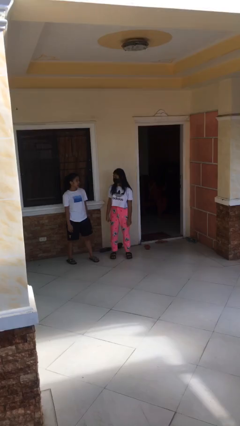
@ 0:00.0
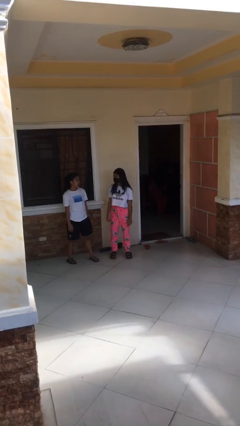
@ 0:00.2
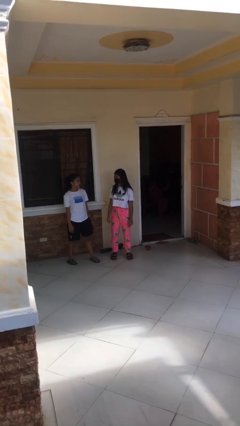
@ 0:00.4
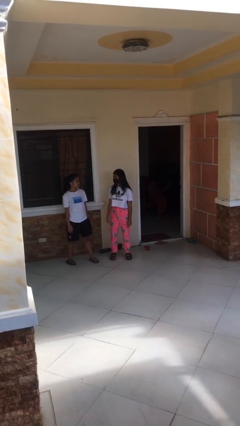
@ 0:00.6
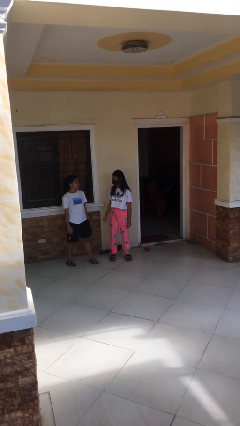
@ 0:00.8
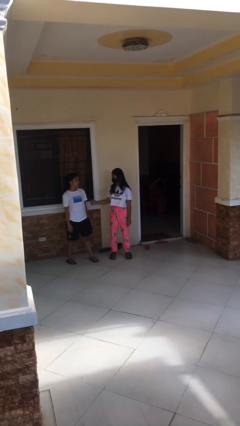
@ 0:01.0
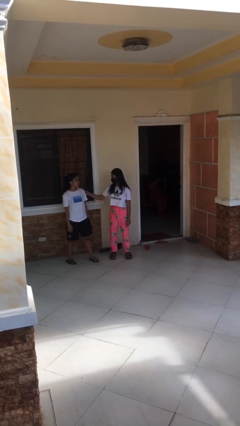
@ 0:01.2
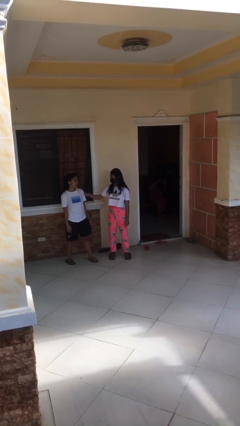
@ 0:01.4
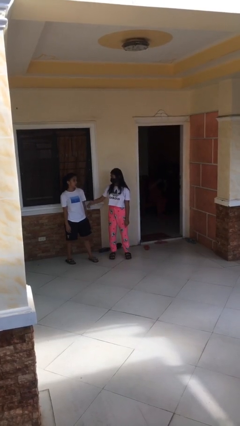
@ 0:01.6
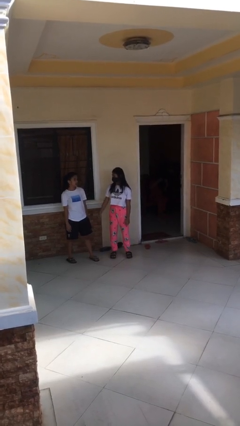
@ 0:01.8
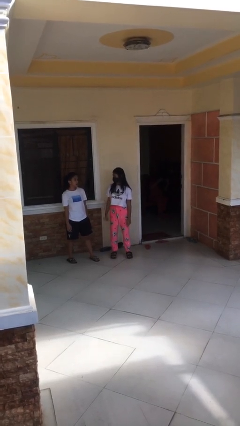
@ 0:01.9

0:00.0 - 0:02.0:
person pounds shoulders of person

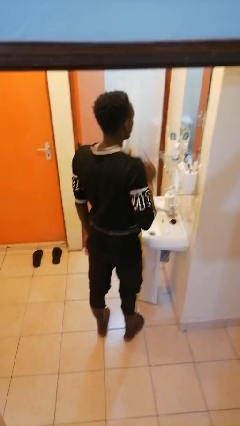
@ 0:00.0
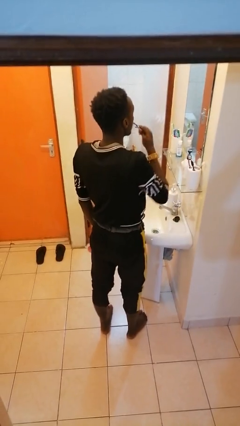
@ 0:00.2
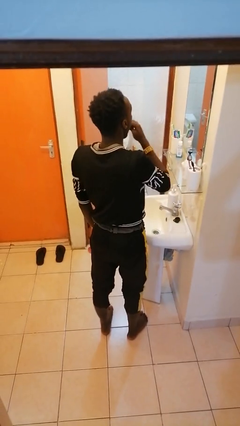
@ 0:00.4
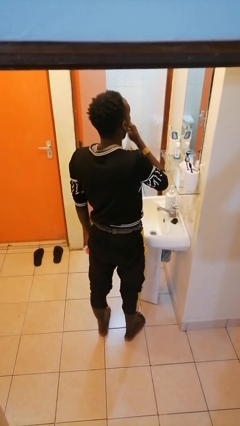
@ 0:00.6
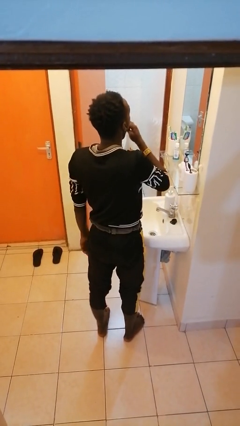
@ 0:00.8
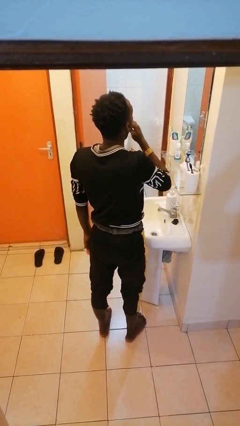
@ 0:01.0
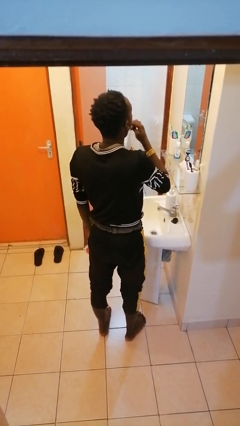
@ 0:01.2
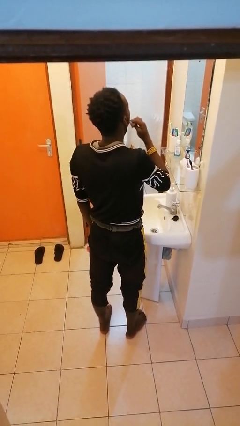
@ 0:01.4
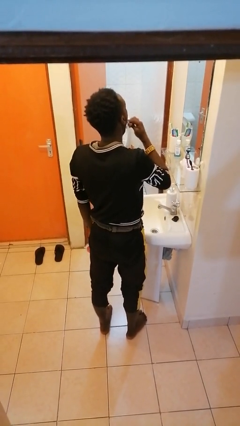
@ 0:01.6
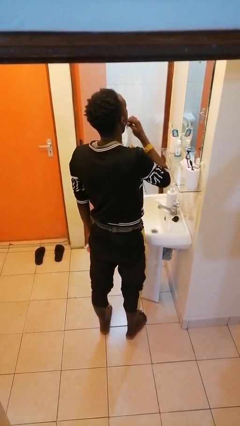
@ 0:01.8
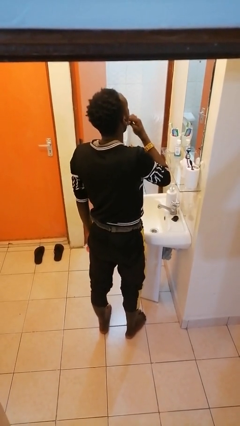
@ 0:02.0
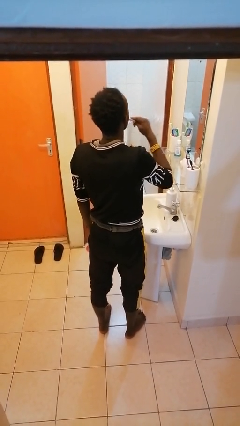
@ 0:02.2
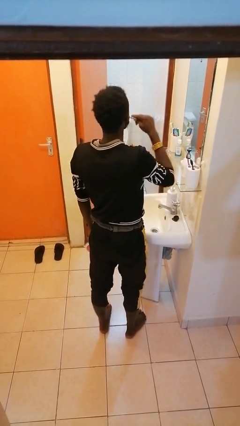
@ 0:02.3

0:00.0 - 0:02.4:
person brushes teeth

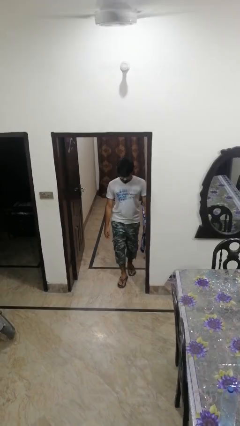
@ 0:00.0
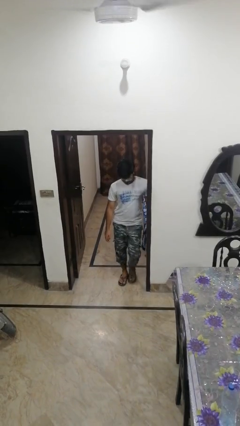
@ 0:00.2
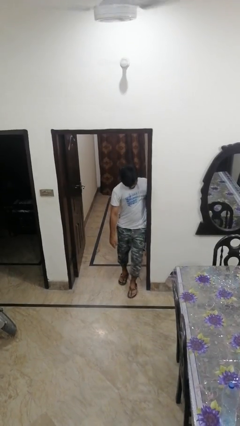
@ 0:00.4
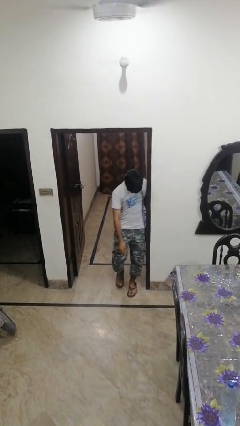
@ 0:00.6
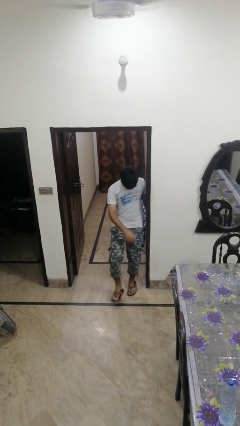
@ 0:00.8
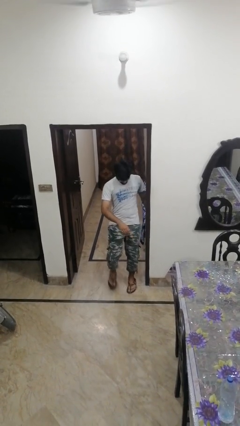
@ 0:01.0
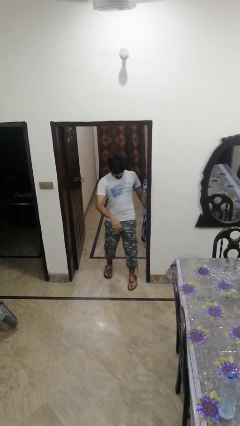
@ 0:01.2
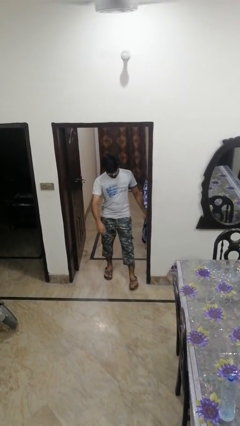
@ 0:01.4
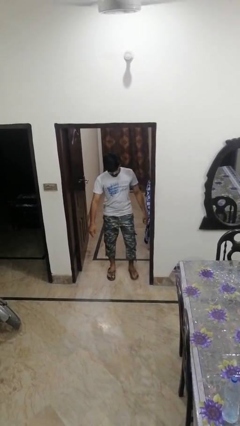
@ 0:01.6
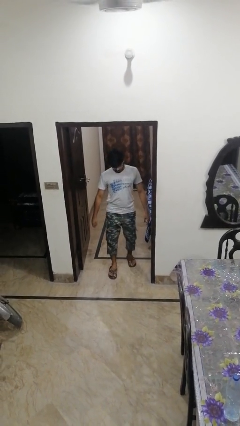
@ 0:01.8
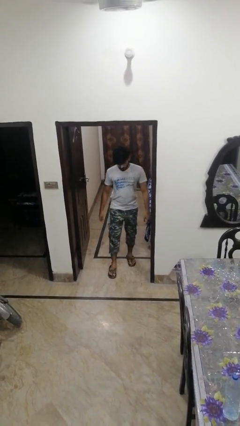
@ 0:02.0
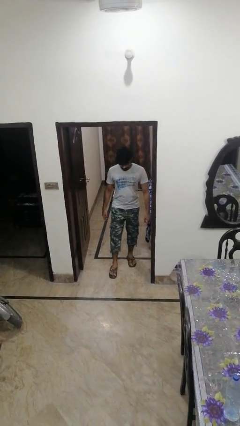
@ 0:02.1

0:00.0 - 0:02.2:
person bumps into wall

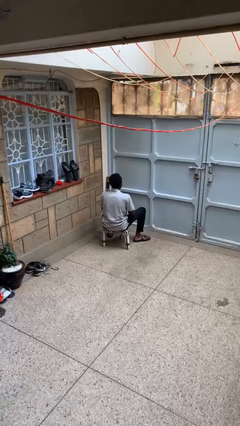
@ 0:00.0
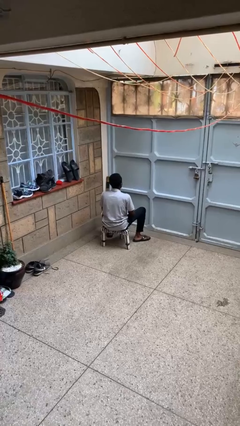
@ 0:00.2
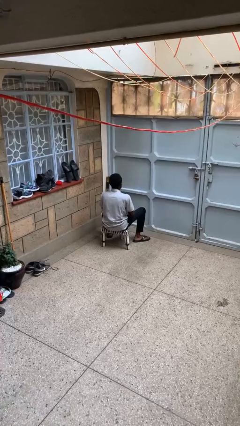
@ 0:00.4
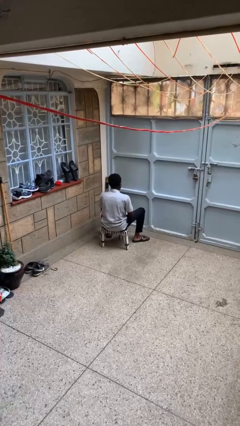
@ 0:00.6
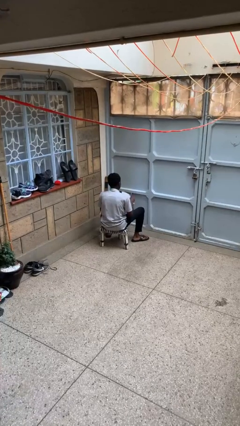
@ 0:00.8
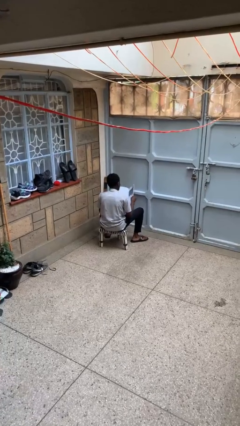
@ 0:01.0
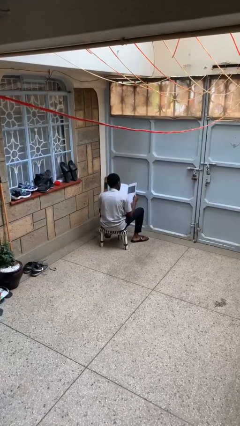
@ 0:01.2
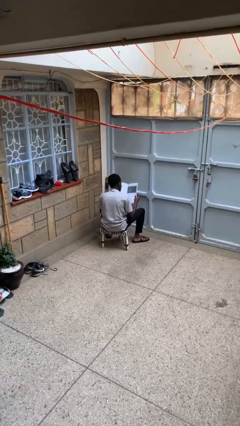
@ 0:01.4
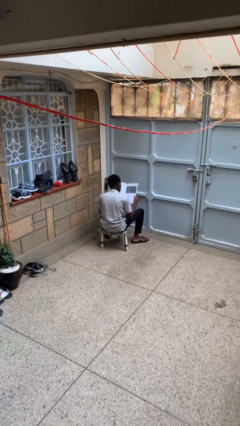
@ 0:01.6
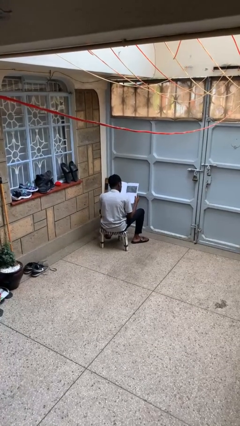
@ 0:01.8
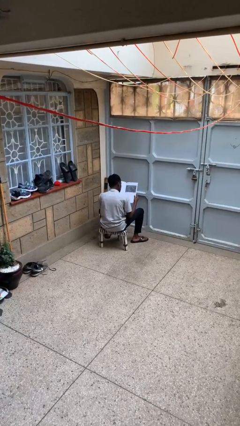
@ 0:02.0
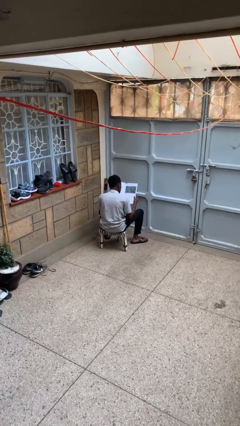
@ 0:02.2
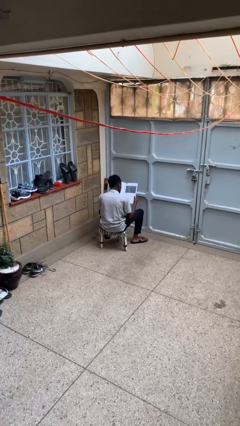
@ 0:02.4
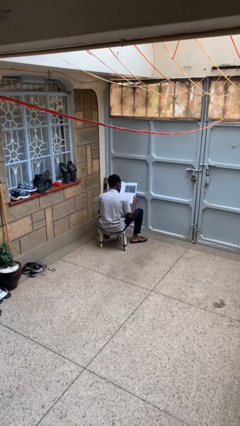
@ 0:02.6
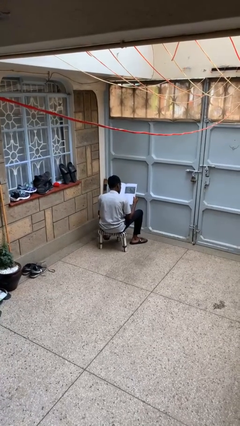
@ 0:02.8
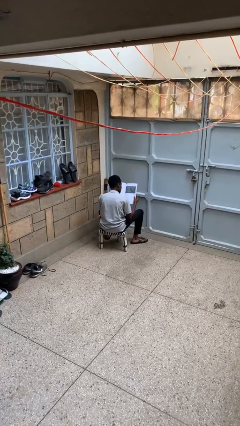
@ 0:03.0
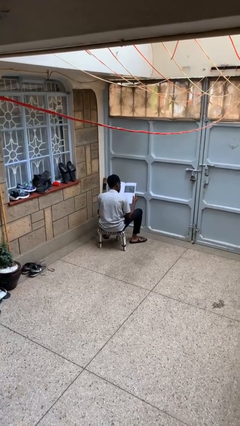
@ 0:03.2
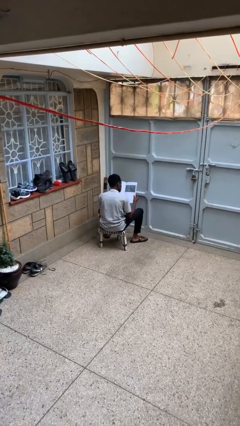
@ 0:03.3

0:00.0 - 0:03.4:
person reads newspaper

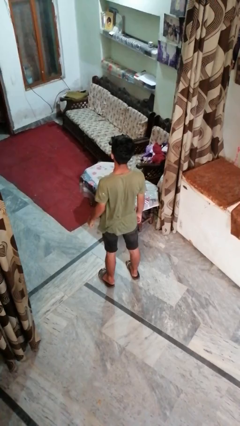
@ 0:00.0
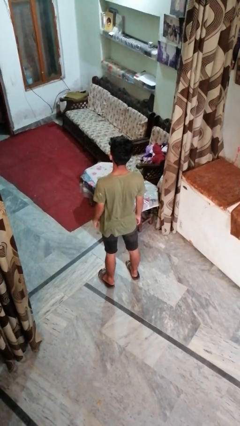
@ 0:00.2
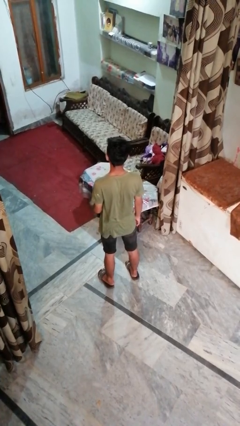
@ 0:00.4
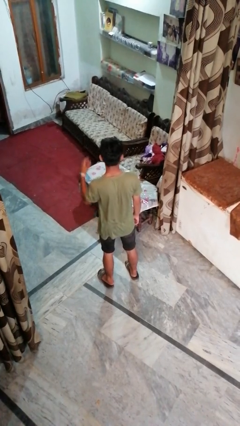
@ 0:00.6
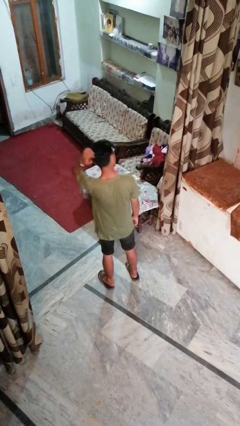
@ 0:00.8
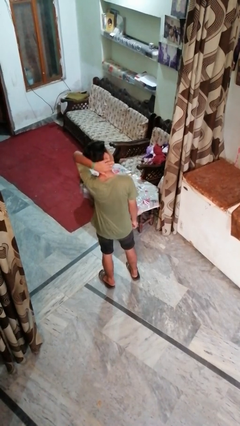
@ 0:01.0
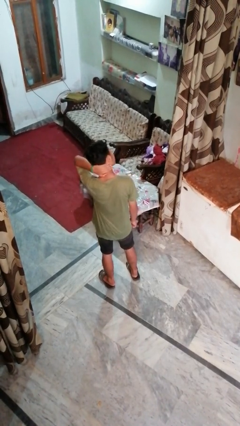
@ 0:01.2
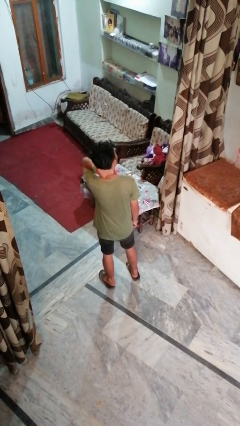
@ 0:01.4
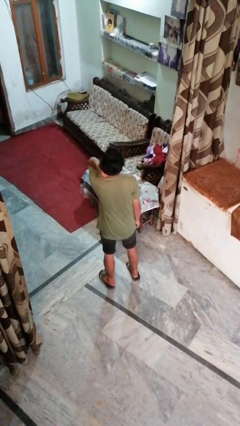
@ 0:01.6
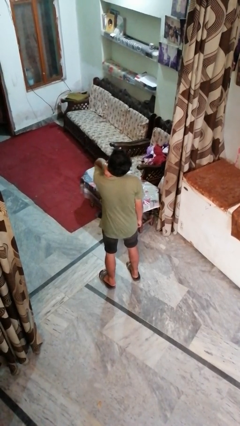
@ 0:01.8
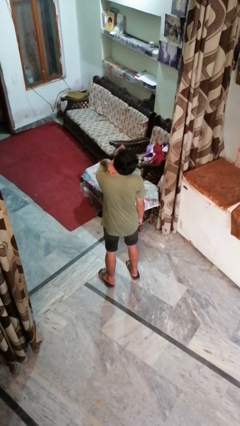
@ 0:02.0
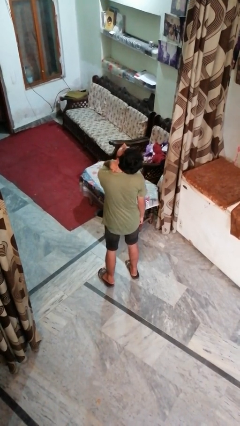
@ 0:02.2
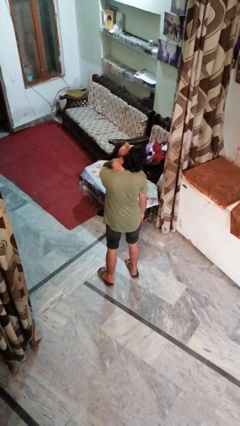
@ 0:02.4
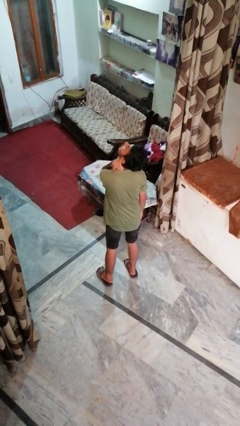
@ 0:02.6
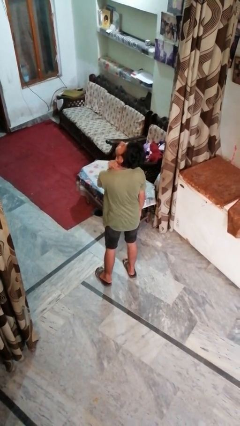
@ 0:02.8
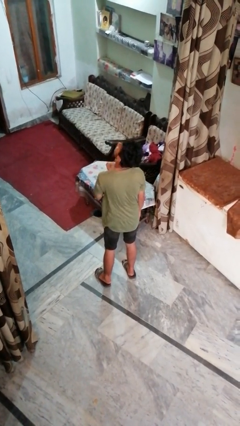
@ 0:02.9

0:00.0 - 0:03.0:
person rubs neck

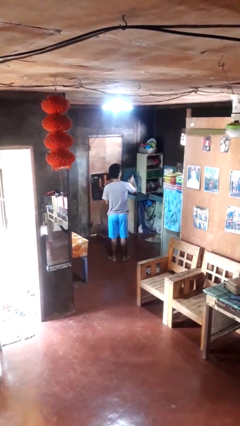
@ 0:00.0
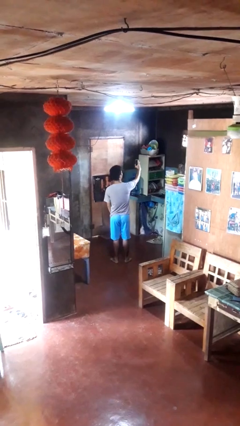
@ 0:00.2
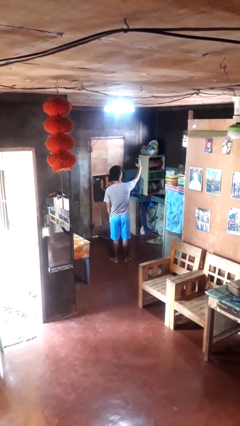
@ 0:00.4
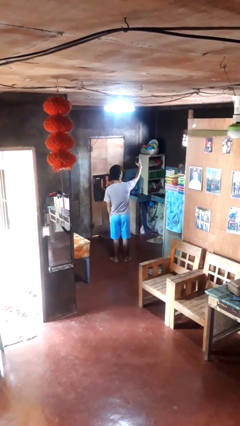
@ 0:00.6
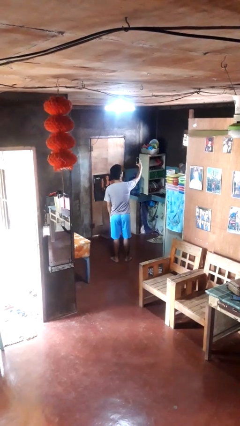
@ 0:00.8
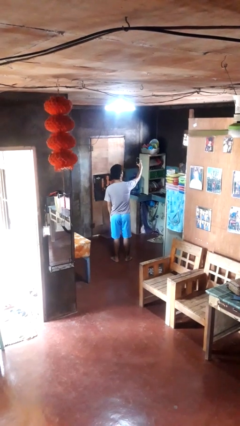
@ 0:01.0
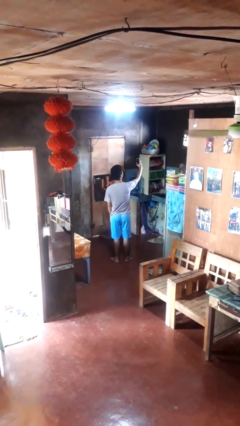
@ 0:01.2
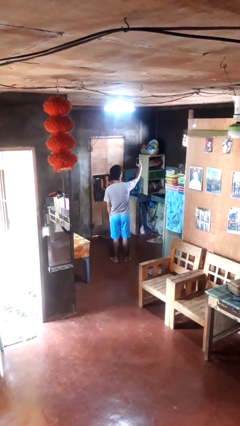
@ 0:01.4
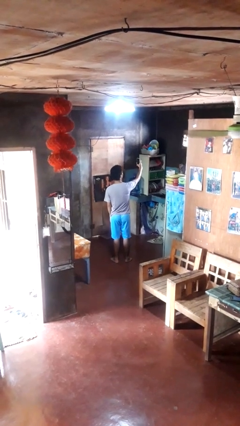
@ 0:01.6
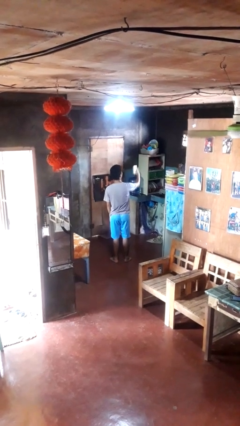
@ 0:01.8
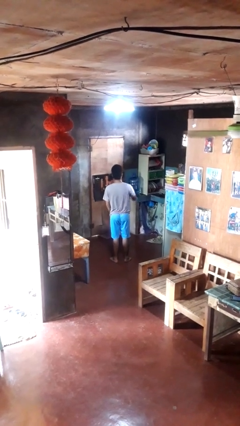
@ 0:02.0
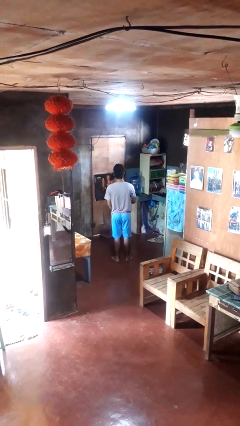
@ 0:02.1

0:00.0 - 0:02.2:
person takes selfie

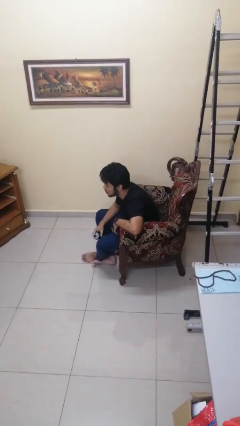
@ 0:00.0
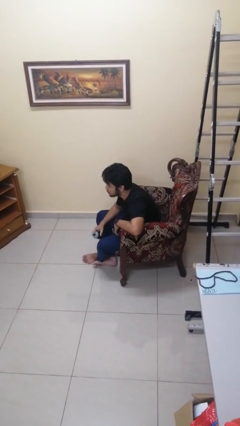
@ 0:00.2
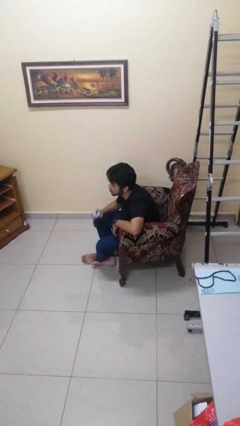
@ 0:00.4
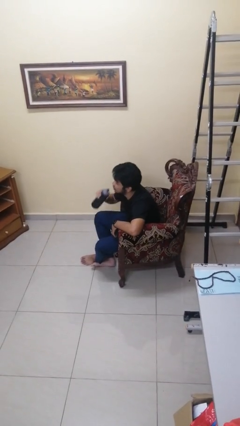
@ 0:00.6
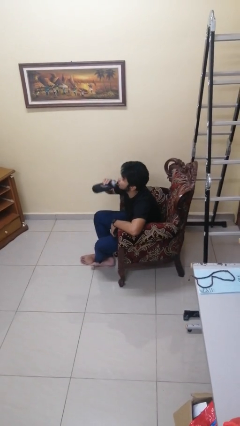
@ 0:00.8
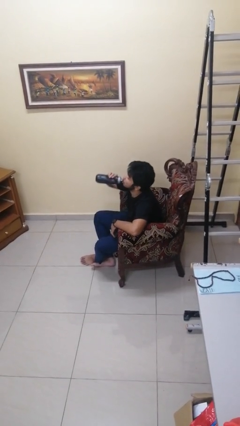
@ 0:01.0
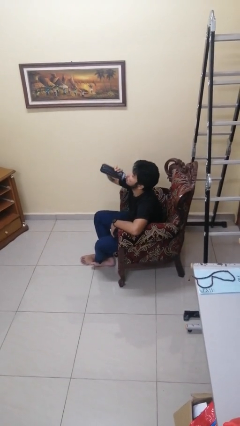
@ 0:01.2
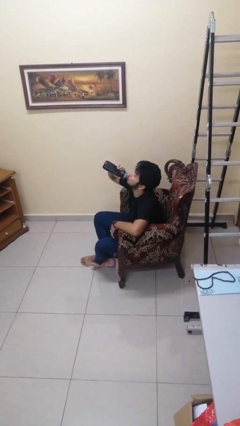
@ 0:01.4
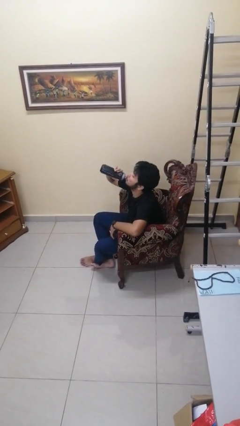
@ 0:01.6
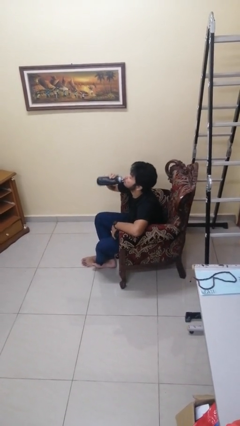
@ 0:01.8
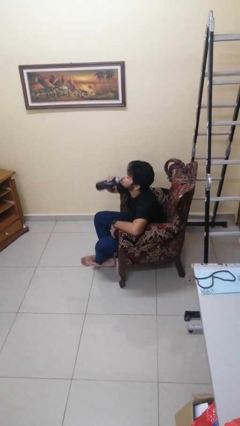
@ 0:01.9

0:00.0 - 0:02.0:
person drinks from bottle
